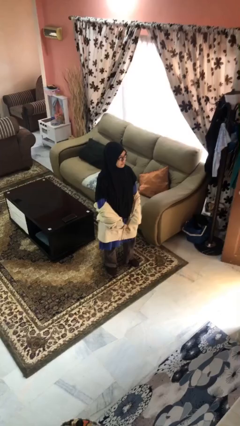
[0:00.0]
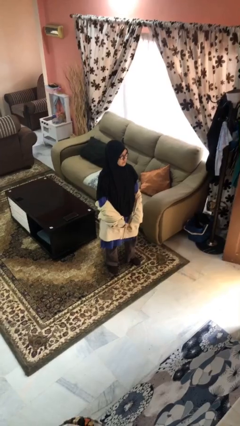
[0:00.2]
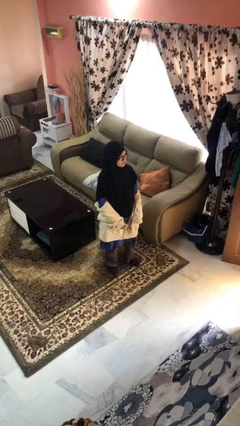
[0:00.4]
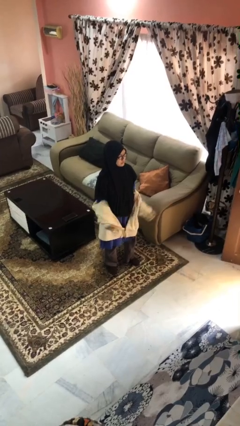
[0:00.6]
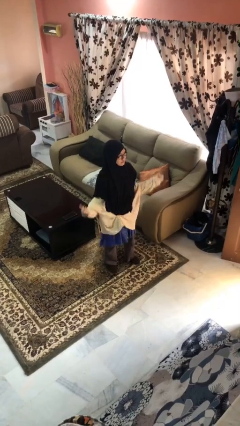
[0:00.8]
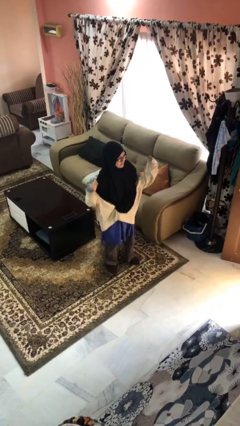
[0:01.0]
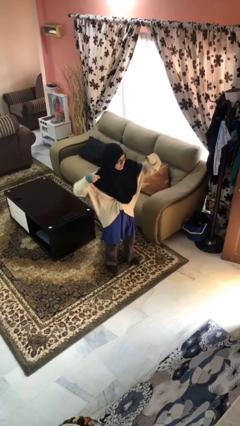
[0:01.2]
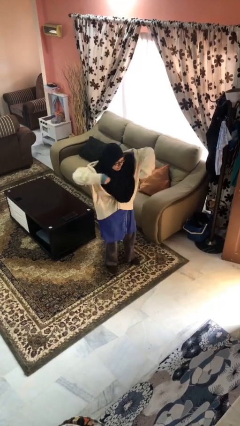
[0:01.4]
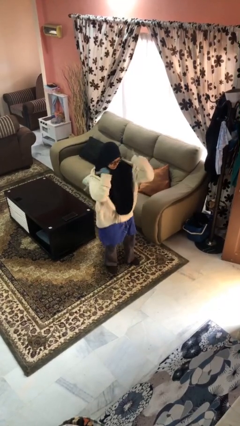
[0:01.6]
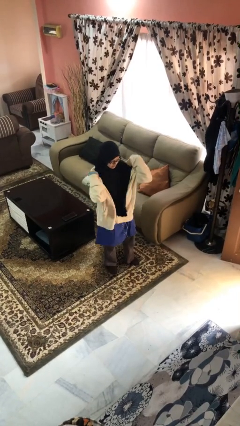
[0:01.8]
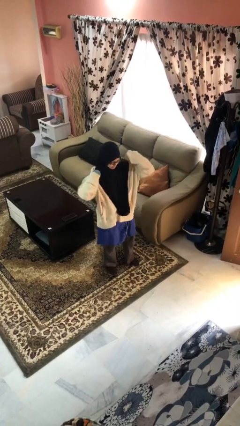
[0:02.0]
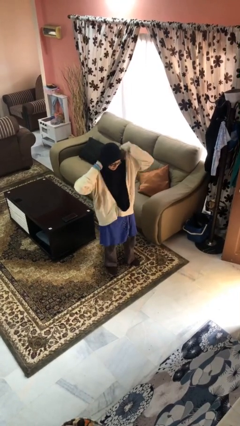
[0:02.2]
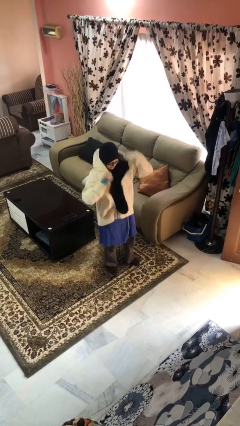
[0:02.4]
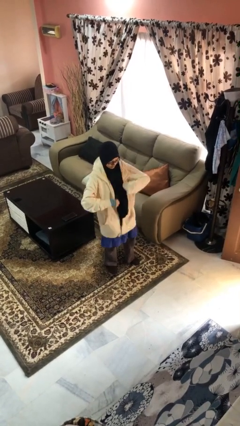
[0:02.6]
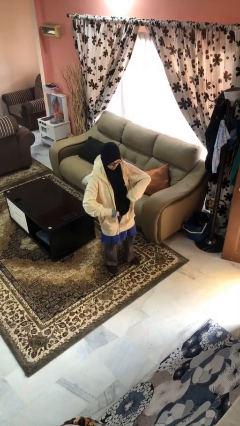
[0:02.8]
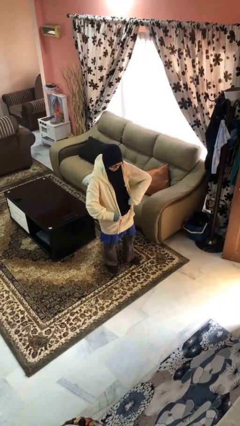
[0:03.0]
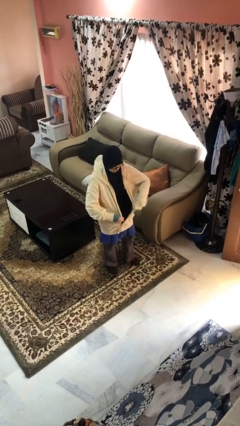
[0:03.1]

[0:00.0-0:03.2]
person puts on jacket

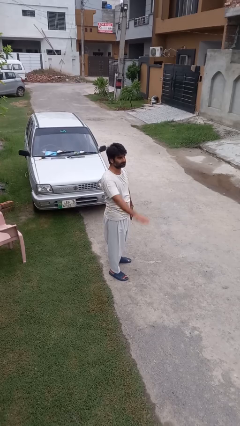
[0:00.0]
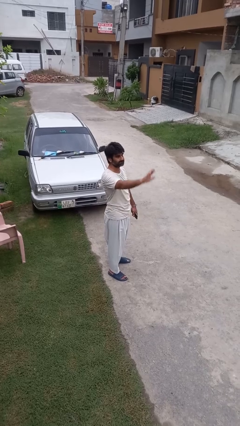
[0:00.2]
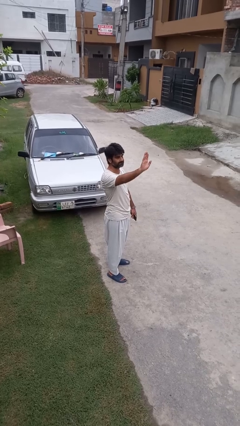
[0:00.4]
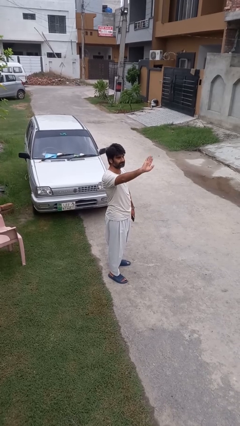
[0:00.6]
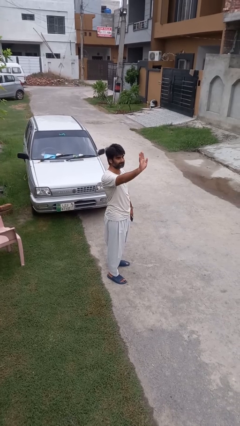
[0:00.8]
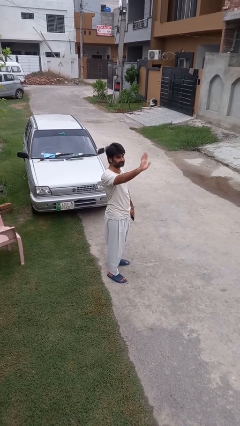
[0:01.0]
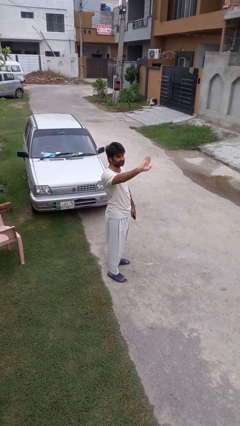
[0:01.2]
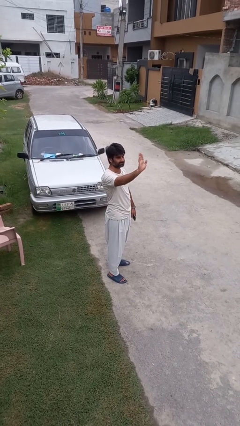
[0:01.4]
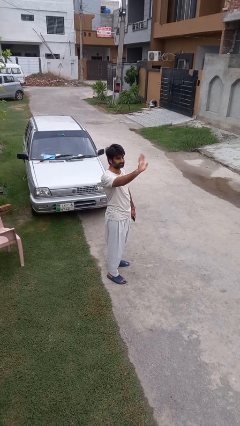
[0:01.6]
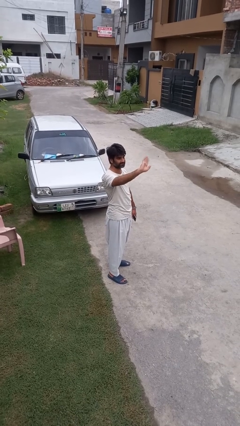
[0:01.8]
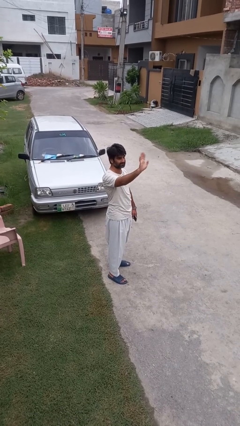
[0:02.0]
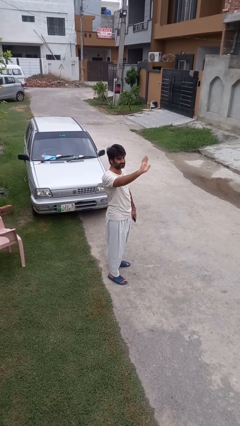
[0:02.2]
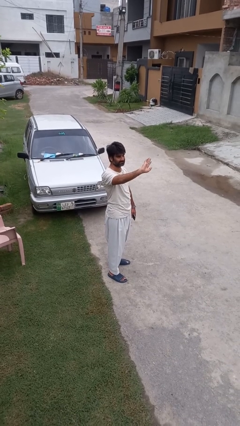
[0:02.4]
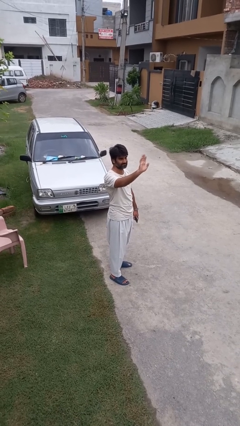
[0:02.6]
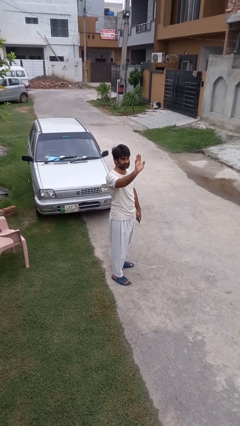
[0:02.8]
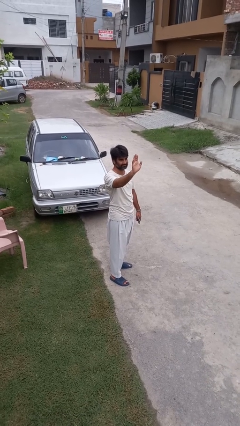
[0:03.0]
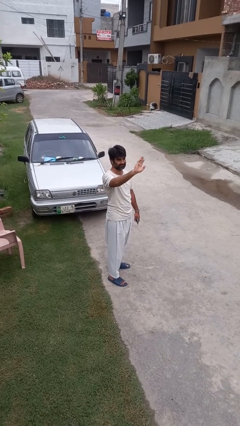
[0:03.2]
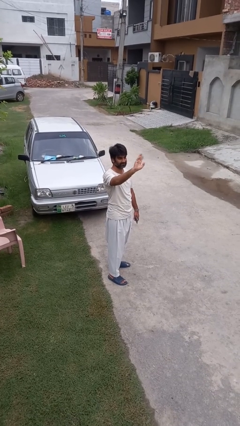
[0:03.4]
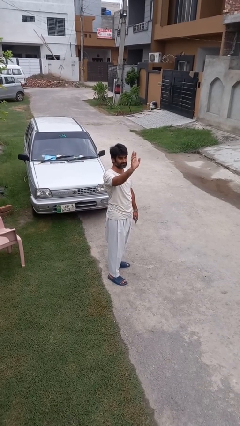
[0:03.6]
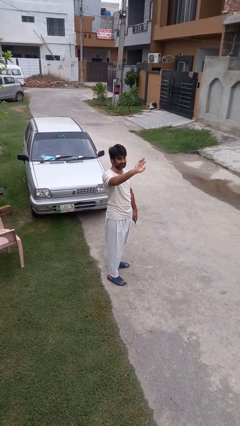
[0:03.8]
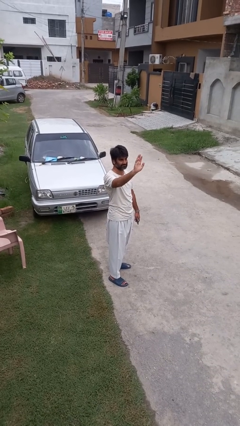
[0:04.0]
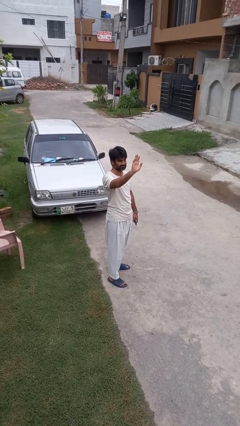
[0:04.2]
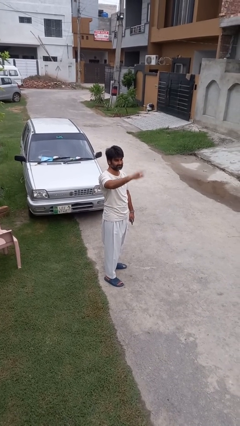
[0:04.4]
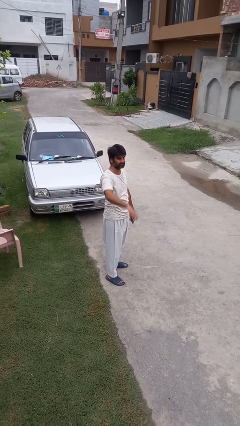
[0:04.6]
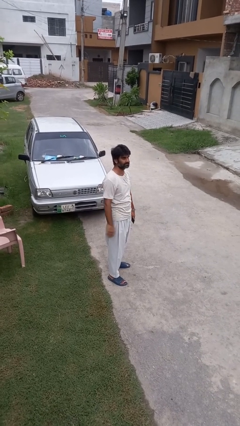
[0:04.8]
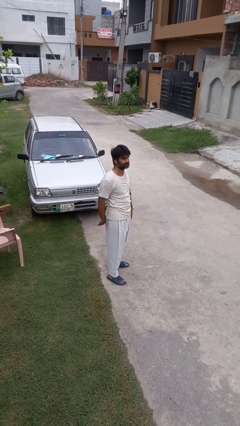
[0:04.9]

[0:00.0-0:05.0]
person waves at person

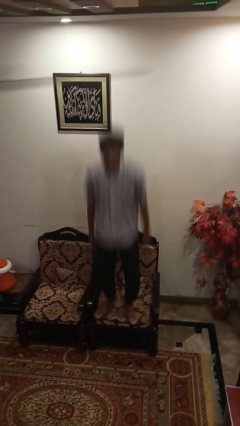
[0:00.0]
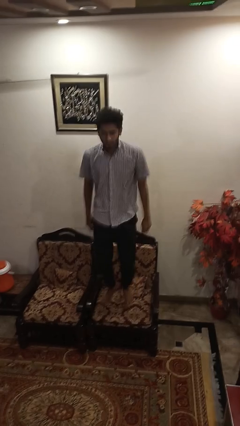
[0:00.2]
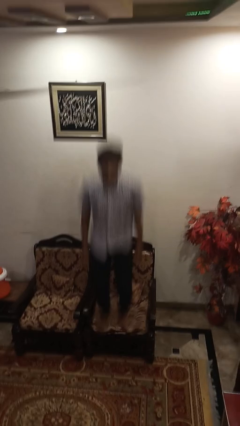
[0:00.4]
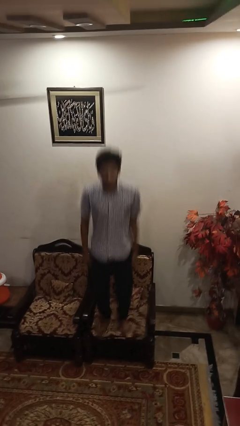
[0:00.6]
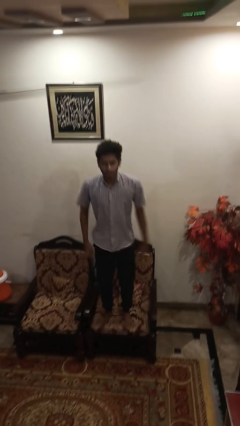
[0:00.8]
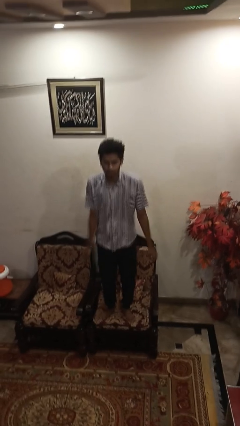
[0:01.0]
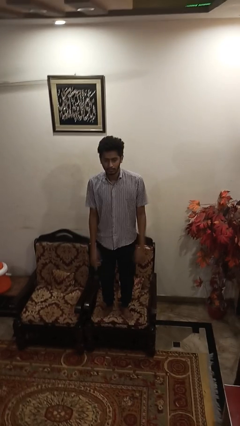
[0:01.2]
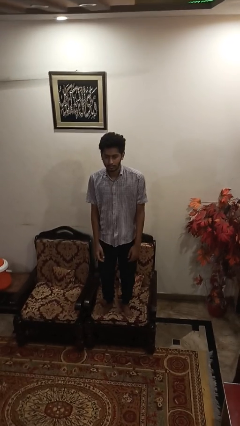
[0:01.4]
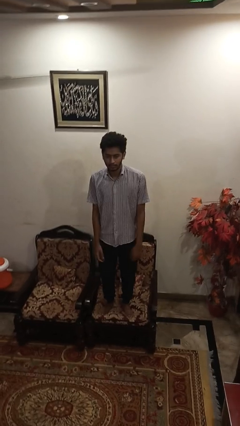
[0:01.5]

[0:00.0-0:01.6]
person jumps on couch

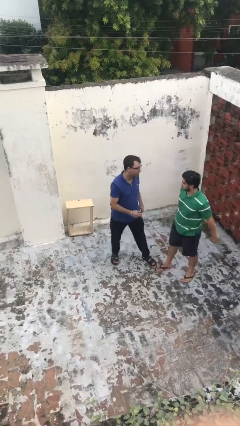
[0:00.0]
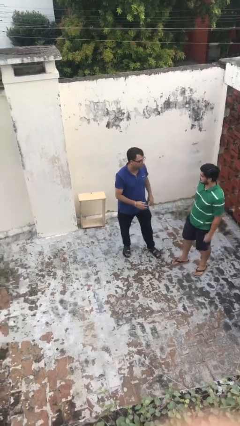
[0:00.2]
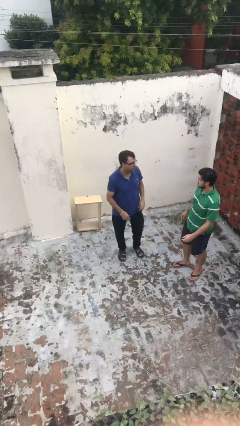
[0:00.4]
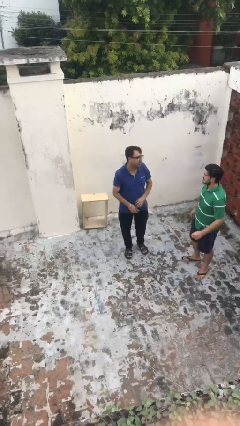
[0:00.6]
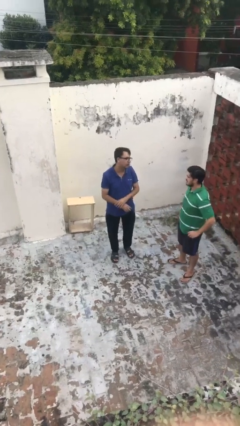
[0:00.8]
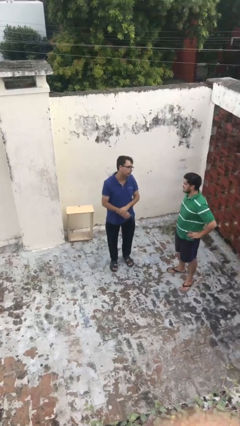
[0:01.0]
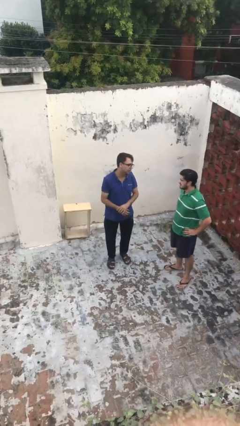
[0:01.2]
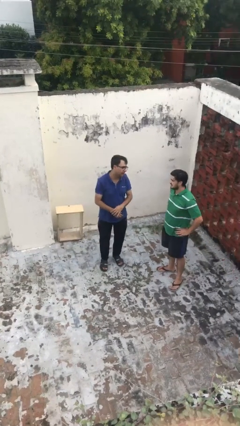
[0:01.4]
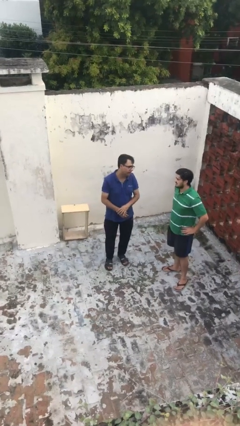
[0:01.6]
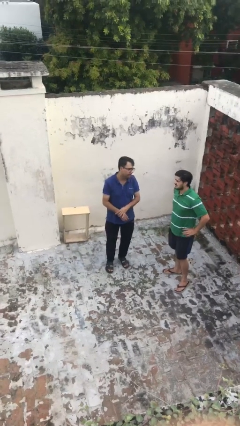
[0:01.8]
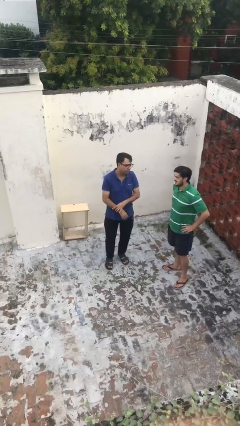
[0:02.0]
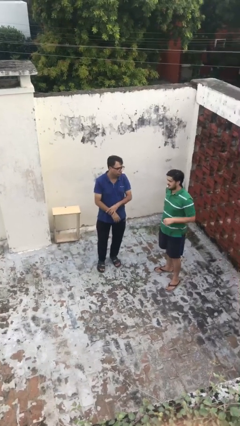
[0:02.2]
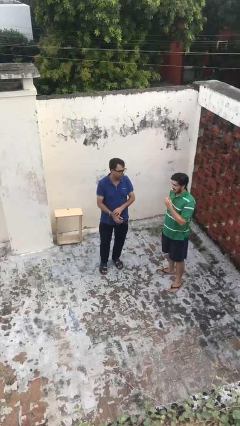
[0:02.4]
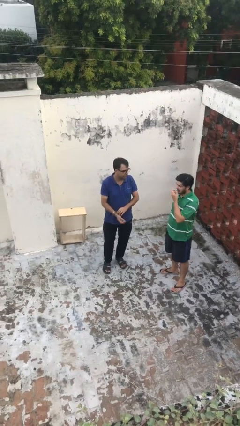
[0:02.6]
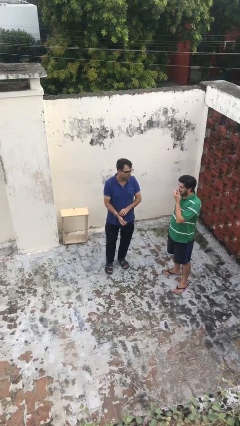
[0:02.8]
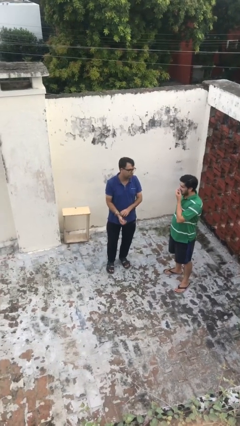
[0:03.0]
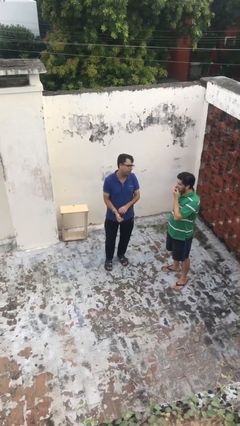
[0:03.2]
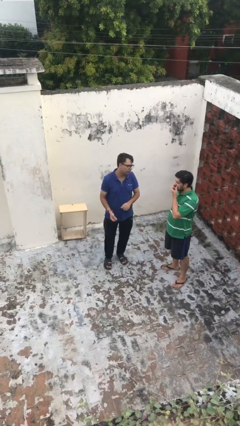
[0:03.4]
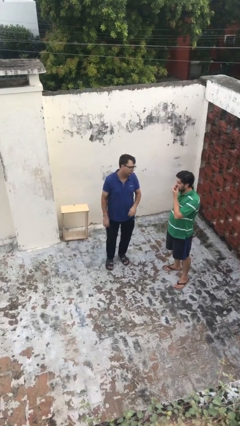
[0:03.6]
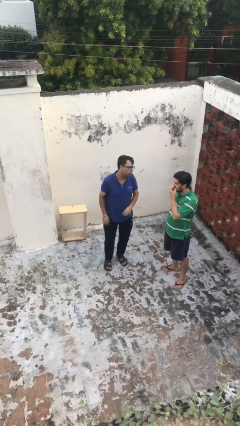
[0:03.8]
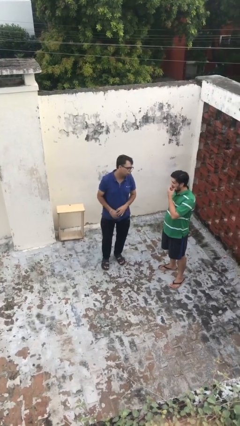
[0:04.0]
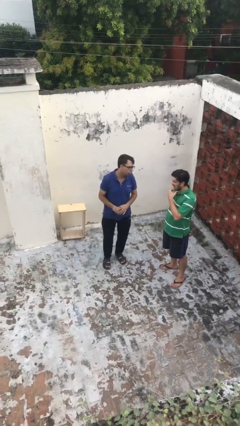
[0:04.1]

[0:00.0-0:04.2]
person talks to person

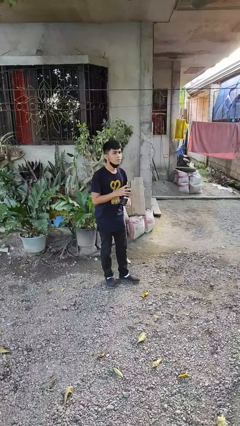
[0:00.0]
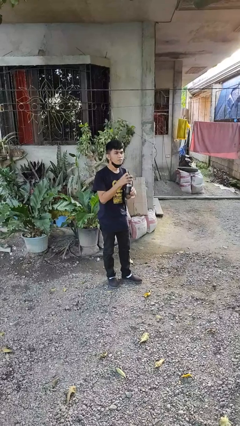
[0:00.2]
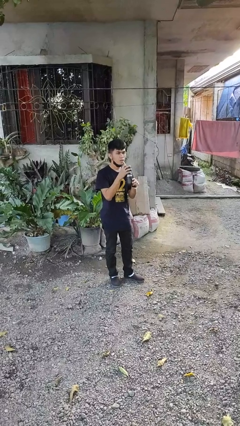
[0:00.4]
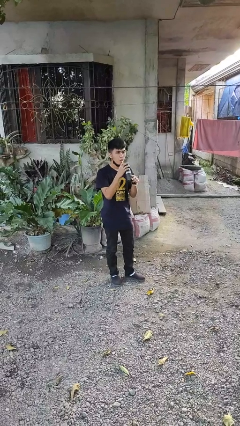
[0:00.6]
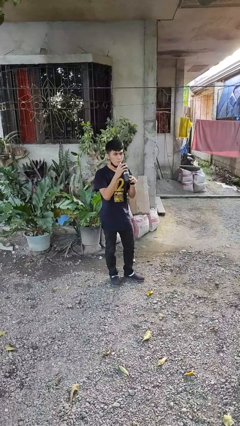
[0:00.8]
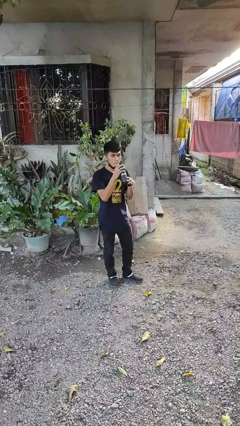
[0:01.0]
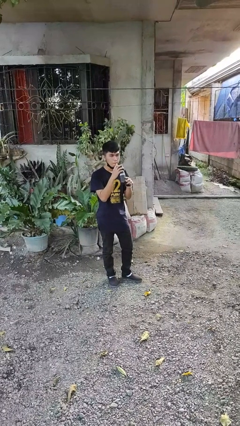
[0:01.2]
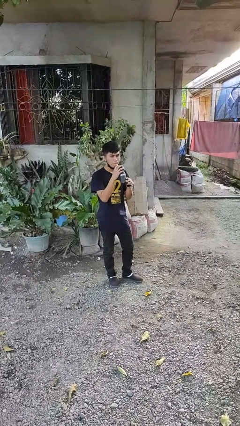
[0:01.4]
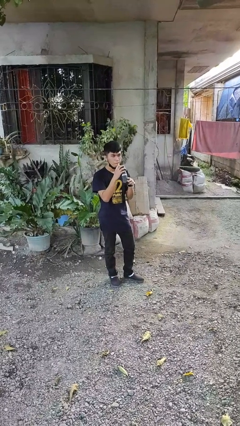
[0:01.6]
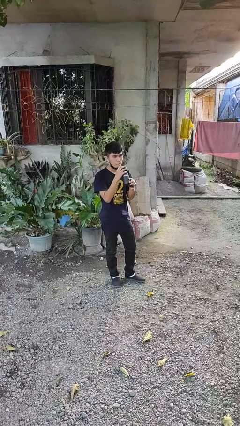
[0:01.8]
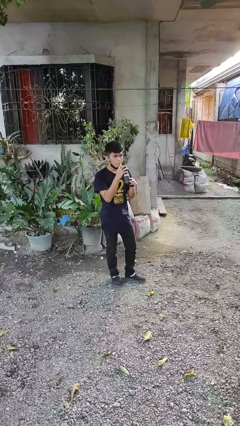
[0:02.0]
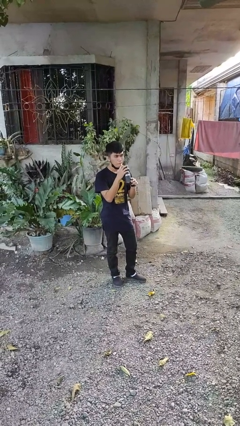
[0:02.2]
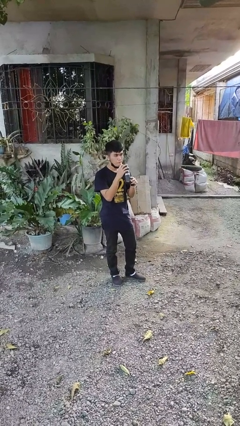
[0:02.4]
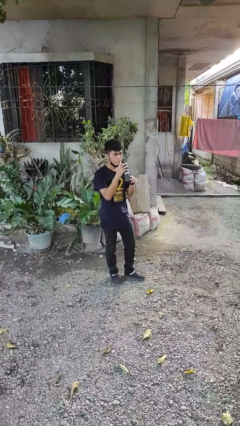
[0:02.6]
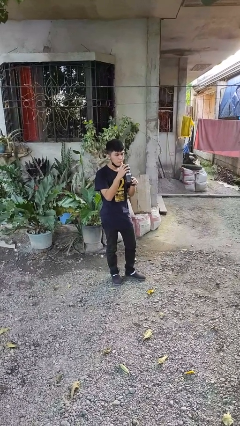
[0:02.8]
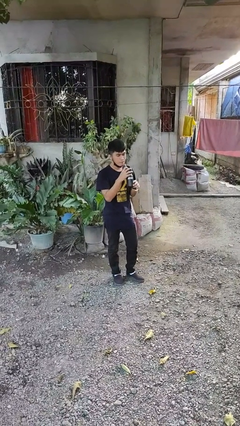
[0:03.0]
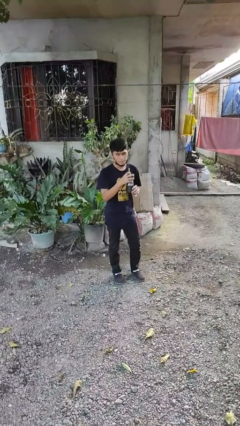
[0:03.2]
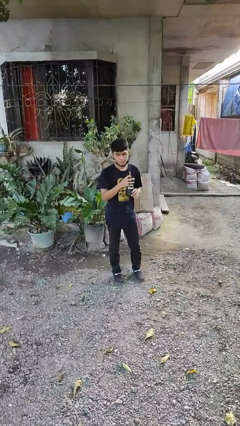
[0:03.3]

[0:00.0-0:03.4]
person drinks from straw

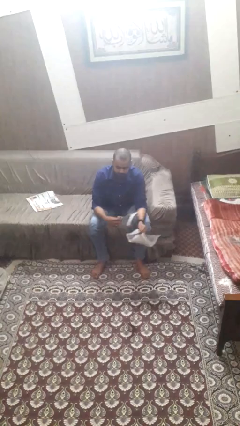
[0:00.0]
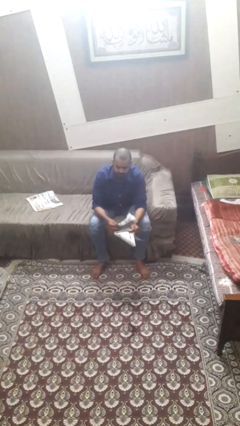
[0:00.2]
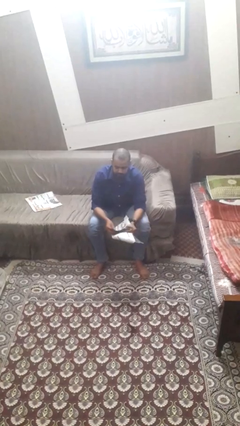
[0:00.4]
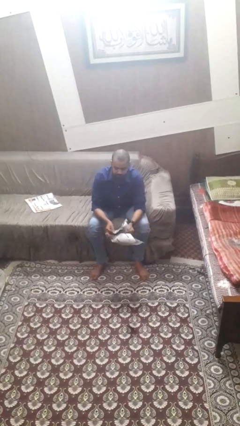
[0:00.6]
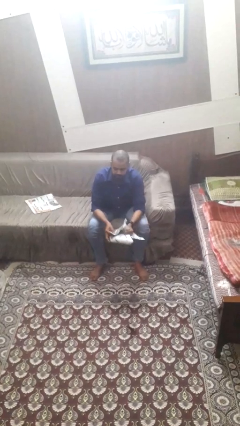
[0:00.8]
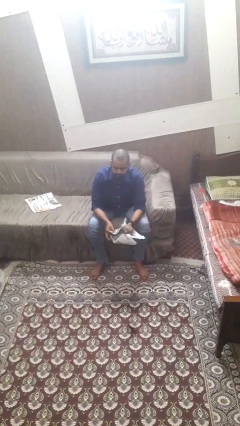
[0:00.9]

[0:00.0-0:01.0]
person tears paper
